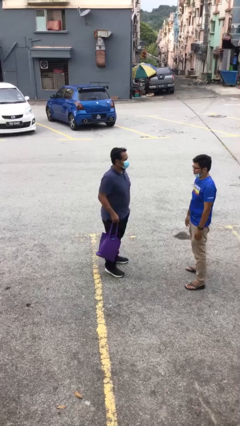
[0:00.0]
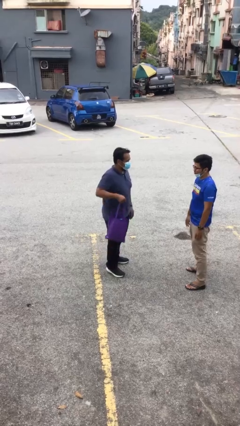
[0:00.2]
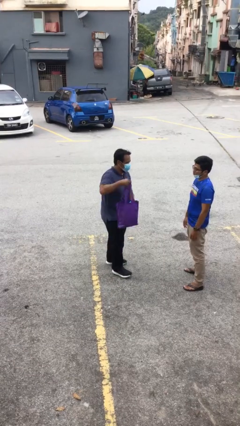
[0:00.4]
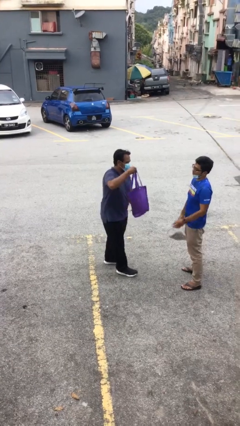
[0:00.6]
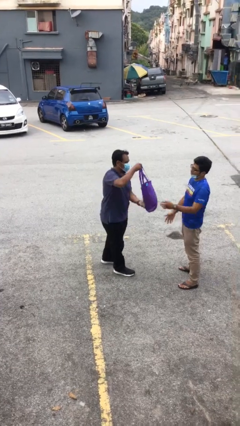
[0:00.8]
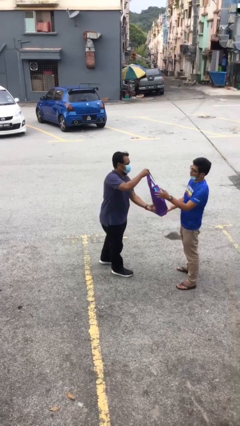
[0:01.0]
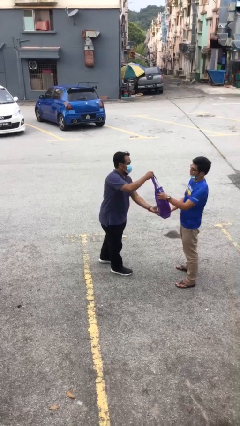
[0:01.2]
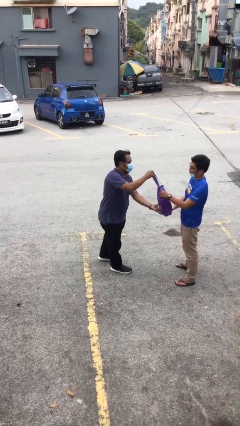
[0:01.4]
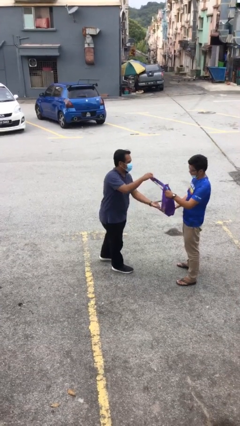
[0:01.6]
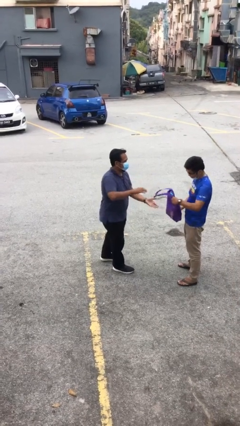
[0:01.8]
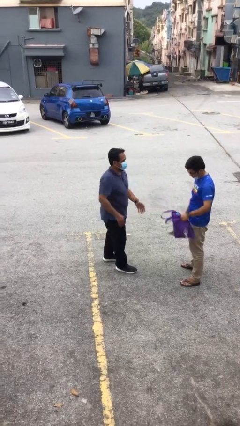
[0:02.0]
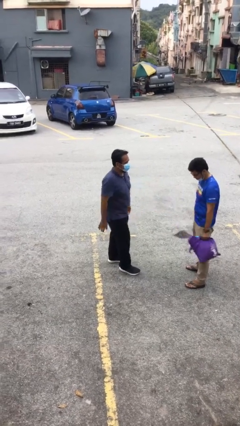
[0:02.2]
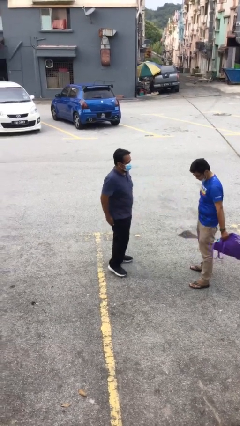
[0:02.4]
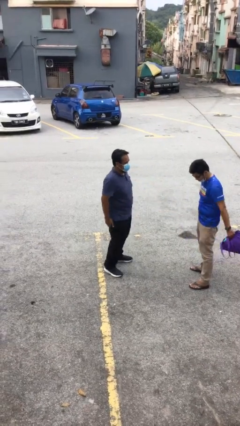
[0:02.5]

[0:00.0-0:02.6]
person transfers object to person

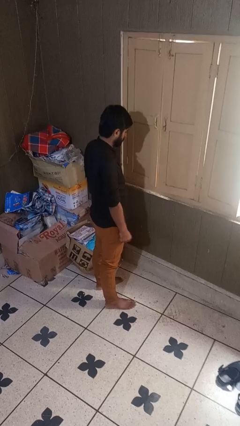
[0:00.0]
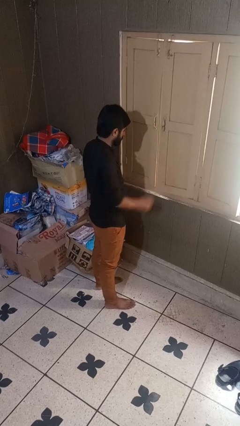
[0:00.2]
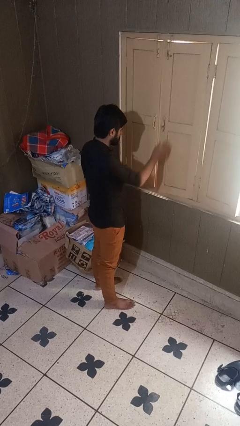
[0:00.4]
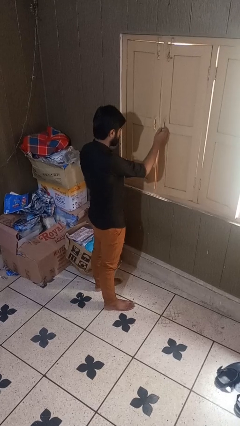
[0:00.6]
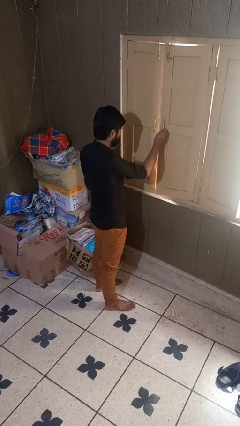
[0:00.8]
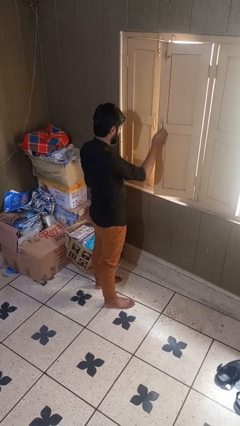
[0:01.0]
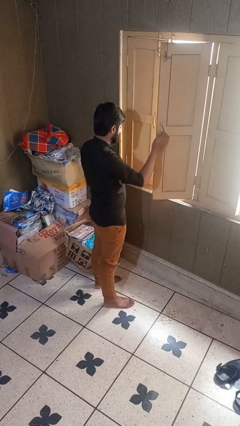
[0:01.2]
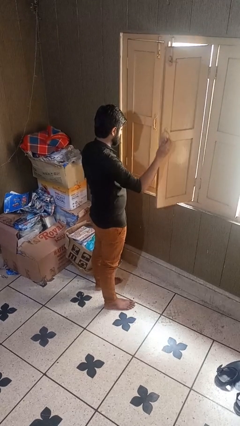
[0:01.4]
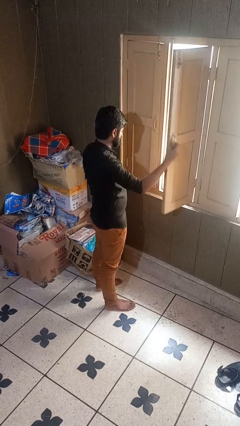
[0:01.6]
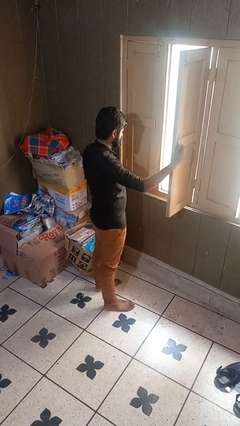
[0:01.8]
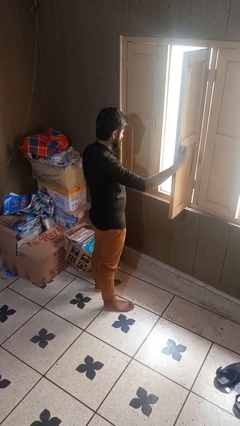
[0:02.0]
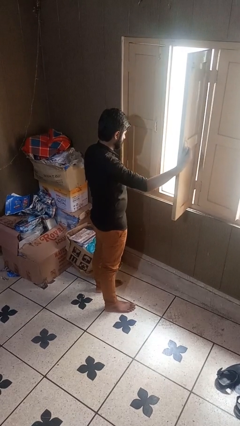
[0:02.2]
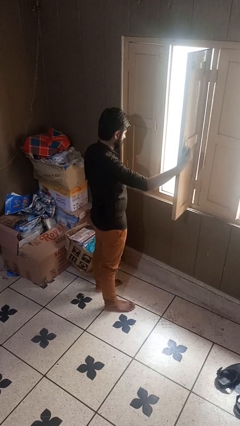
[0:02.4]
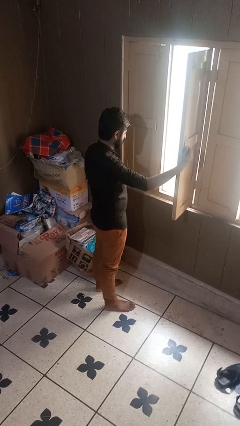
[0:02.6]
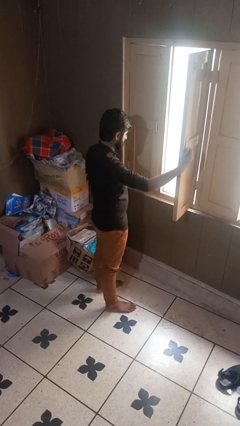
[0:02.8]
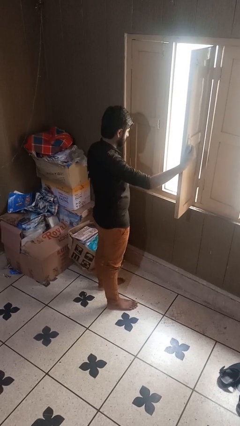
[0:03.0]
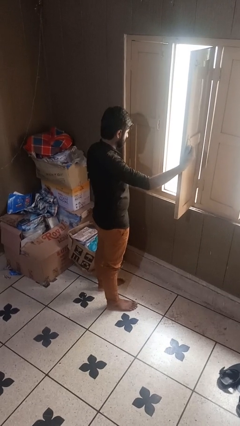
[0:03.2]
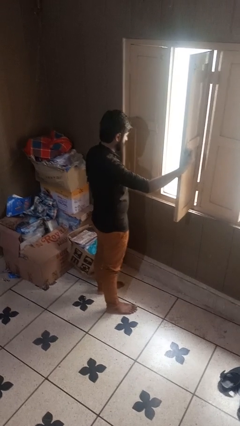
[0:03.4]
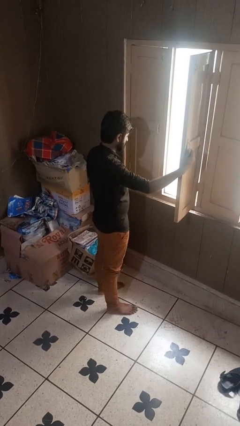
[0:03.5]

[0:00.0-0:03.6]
person opens home window

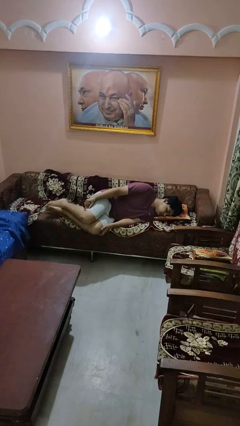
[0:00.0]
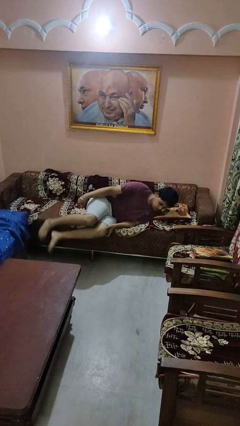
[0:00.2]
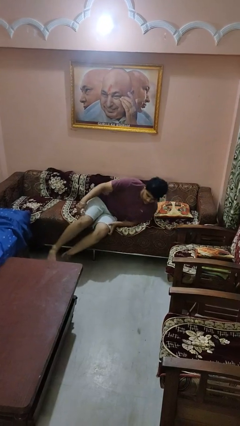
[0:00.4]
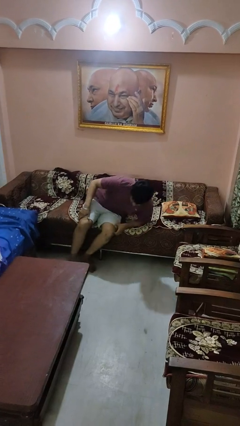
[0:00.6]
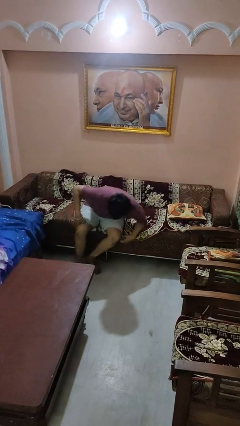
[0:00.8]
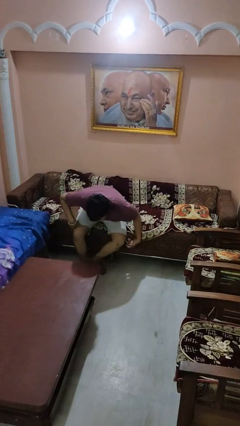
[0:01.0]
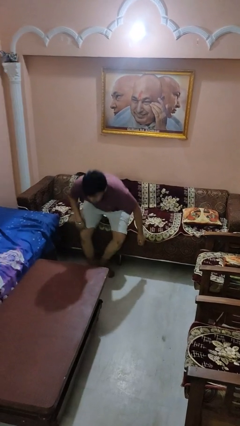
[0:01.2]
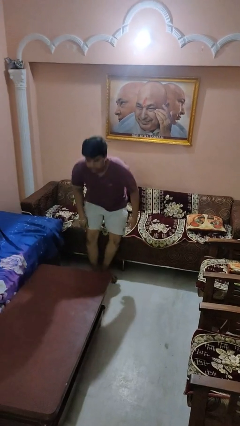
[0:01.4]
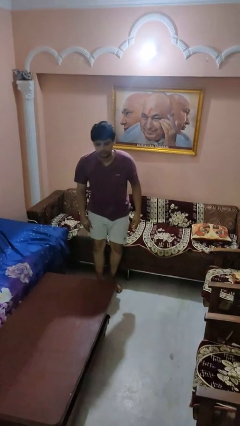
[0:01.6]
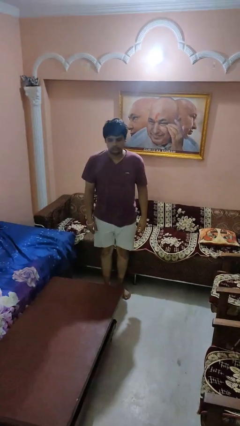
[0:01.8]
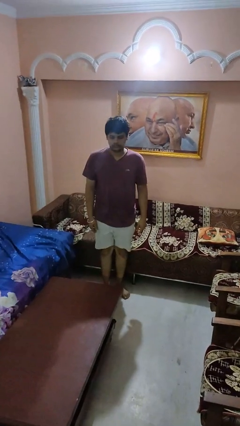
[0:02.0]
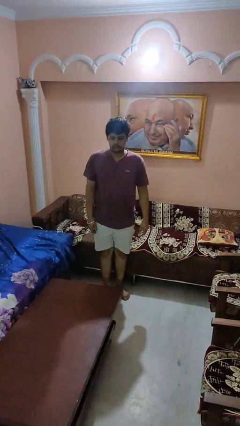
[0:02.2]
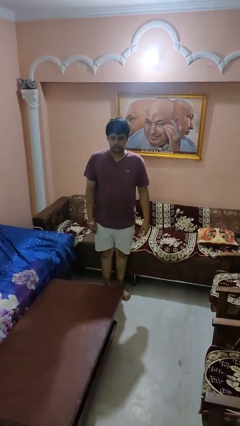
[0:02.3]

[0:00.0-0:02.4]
person stands up

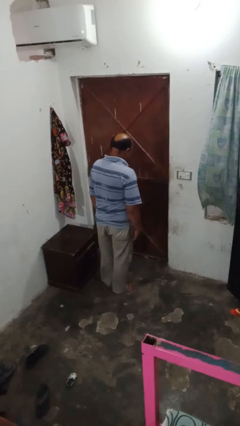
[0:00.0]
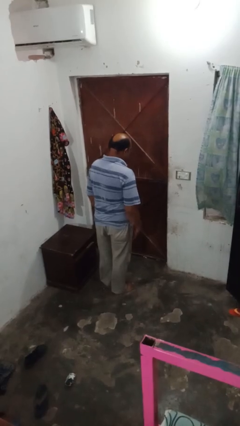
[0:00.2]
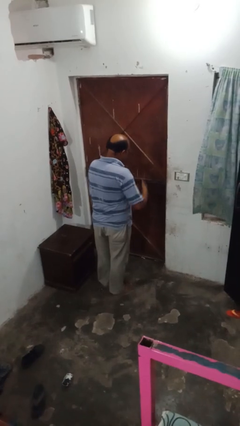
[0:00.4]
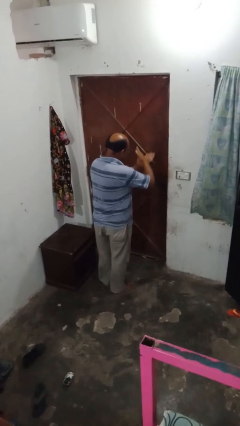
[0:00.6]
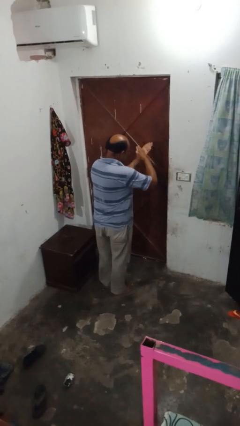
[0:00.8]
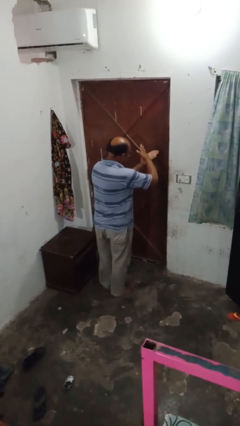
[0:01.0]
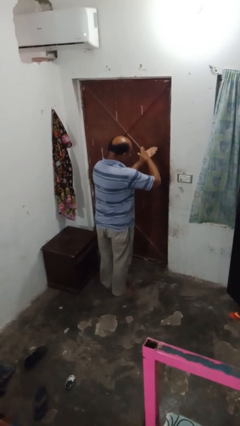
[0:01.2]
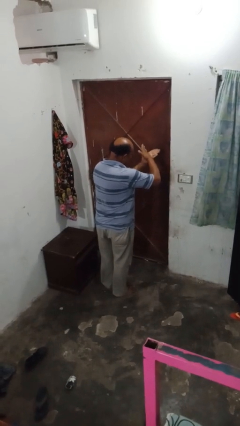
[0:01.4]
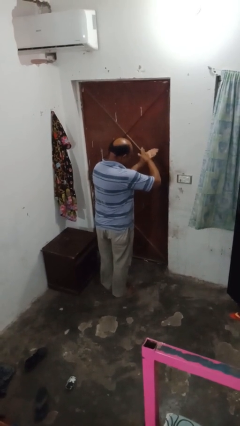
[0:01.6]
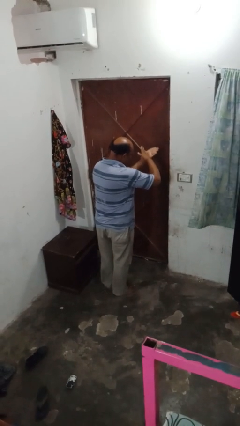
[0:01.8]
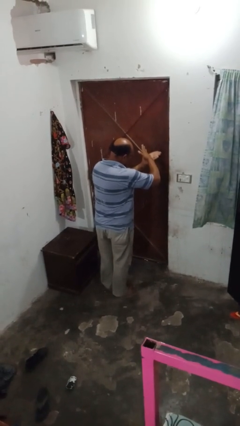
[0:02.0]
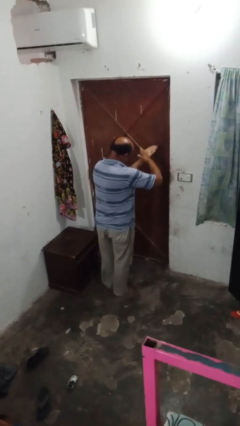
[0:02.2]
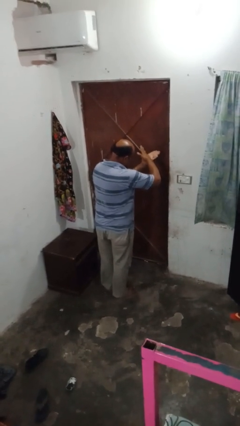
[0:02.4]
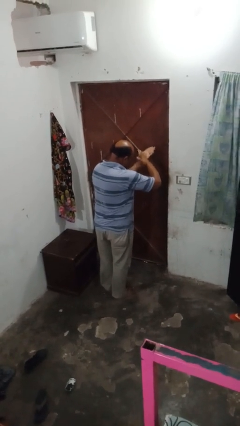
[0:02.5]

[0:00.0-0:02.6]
person gestures cut

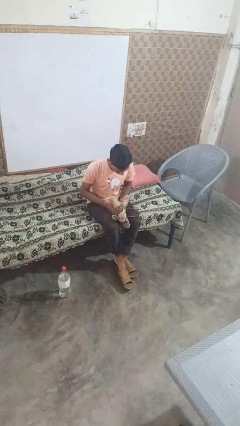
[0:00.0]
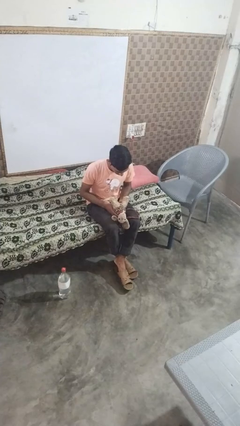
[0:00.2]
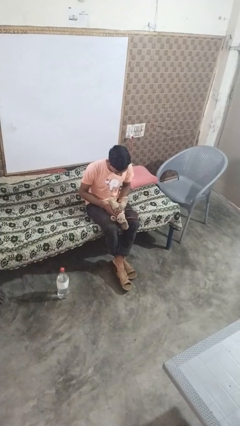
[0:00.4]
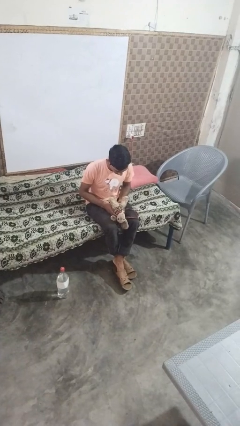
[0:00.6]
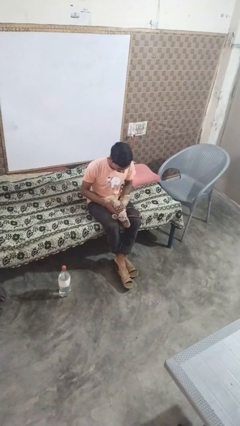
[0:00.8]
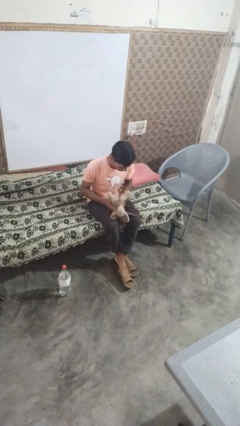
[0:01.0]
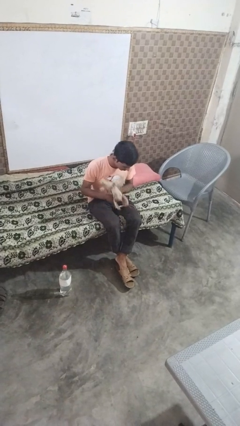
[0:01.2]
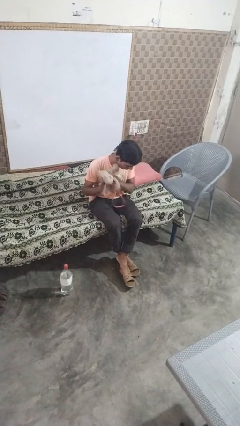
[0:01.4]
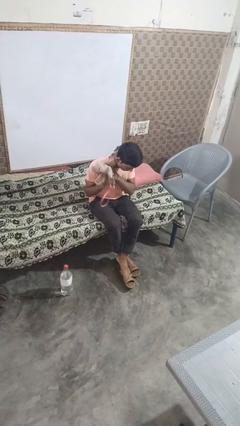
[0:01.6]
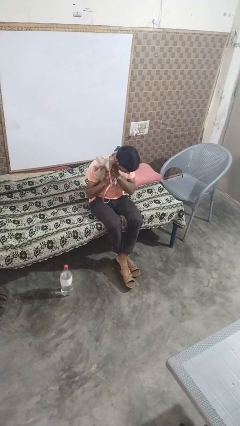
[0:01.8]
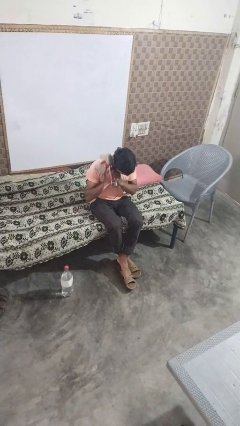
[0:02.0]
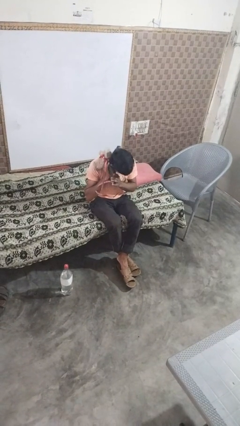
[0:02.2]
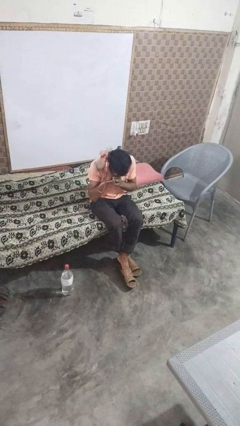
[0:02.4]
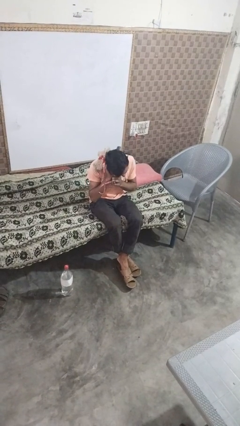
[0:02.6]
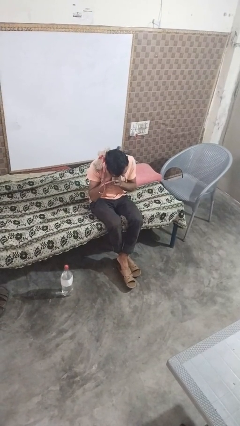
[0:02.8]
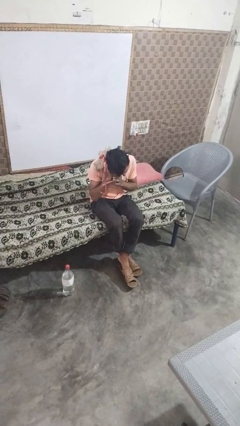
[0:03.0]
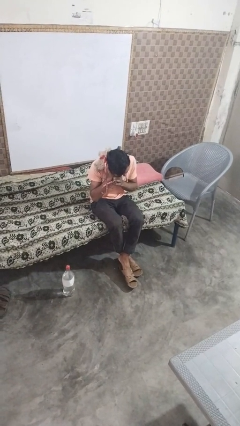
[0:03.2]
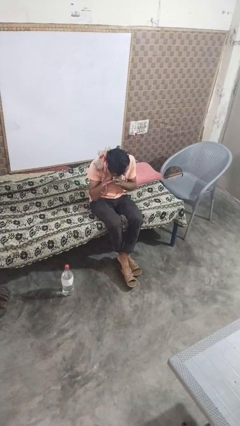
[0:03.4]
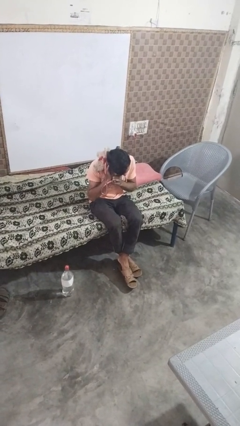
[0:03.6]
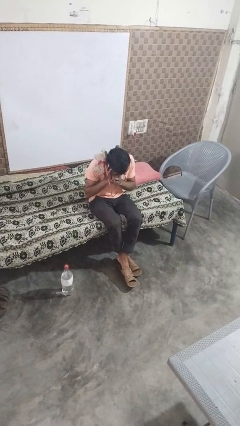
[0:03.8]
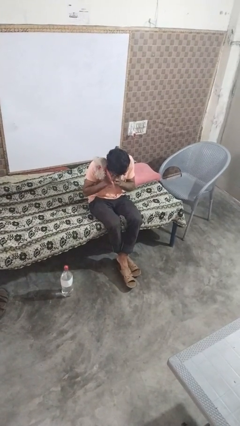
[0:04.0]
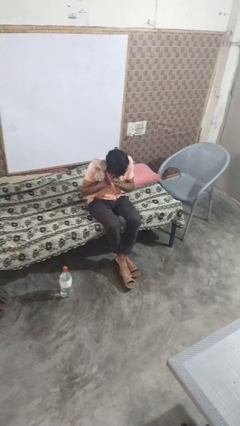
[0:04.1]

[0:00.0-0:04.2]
person hugs stuffed animal

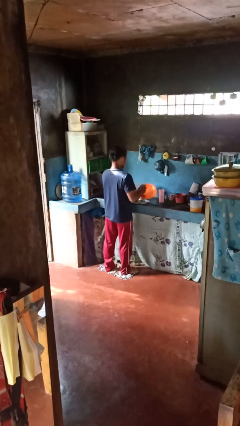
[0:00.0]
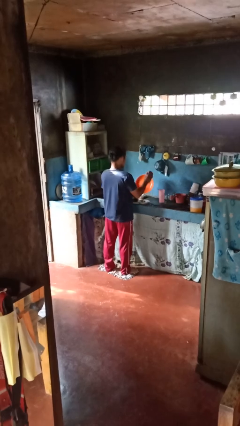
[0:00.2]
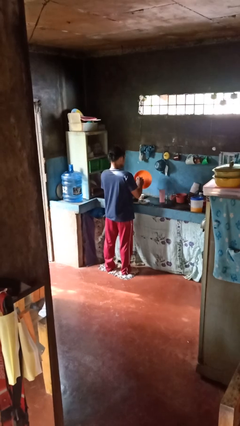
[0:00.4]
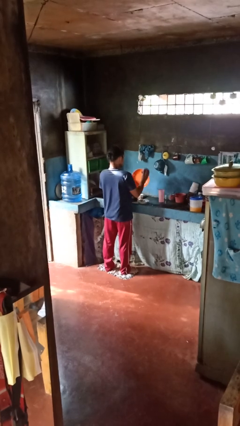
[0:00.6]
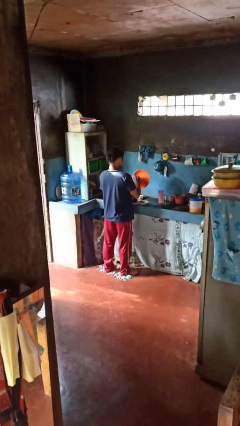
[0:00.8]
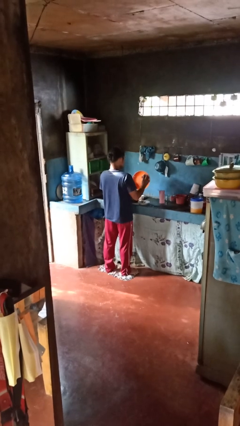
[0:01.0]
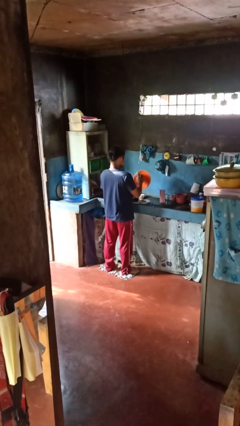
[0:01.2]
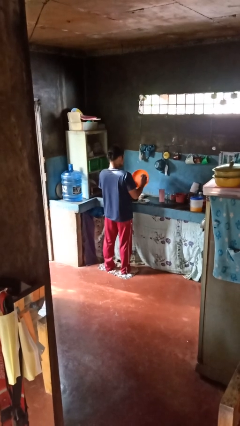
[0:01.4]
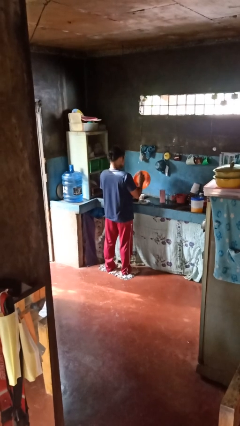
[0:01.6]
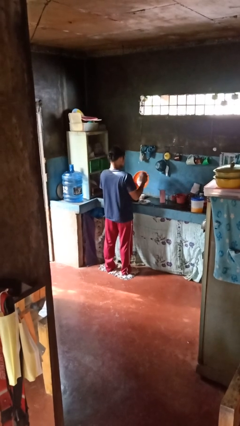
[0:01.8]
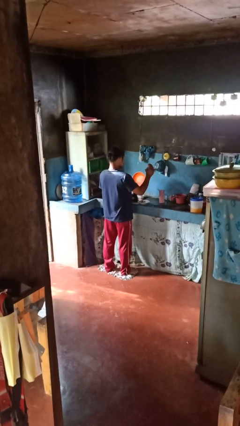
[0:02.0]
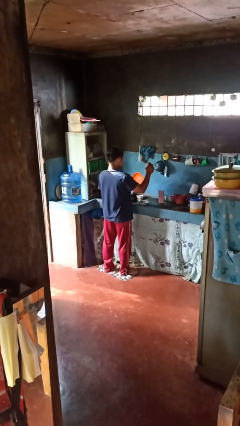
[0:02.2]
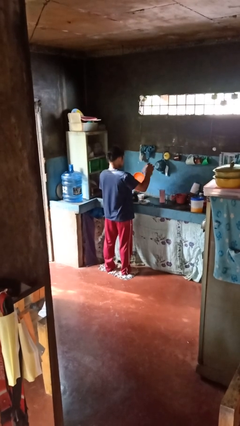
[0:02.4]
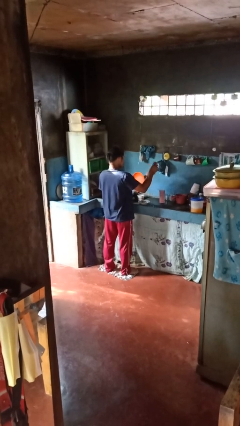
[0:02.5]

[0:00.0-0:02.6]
person dries dish
